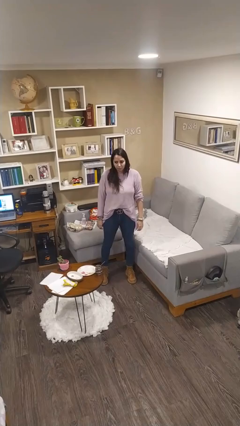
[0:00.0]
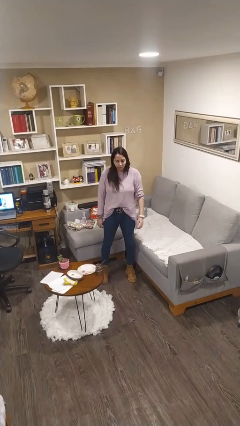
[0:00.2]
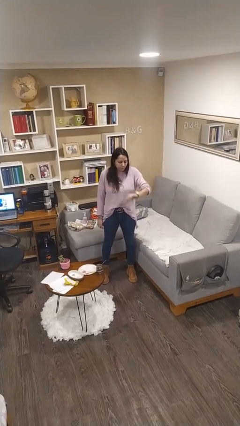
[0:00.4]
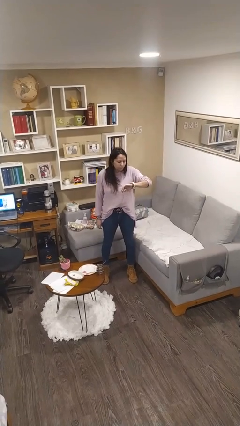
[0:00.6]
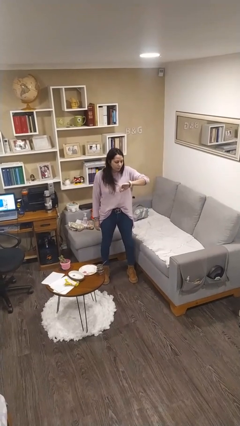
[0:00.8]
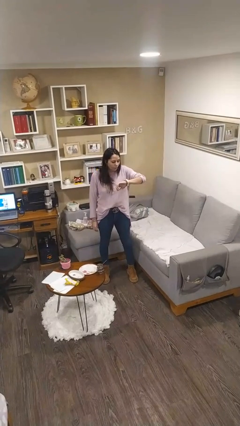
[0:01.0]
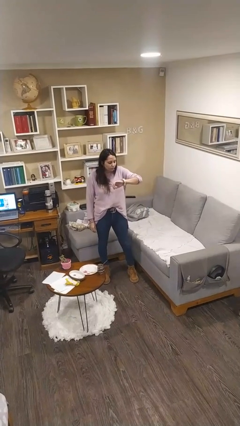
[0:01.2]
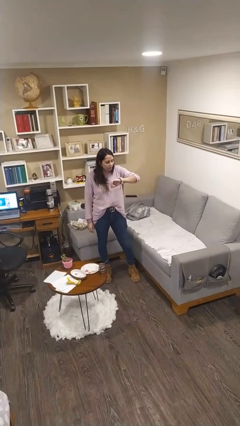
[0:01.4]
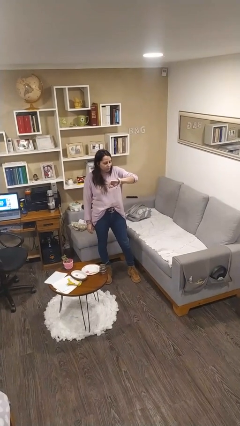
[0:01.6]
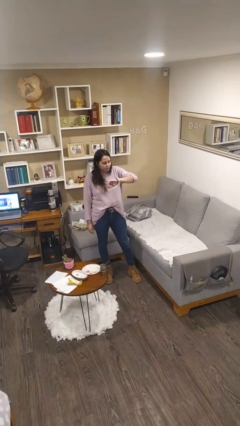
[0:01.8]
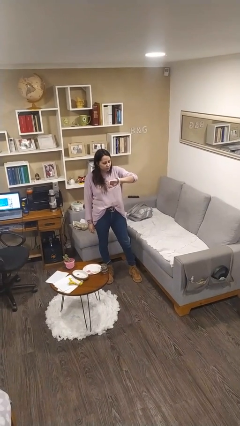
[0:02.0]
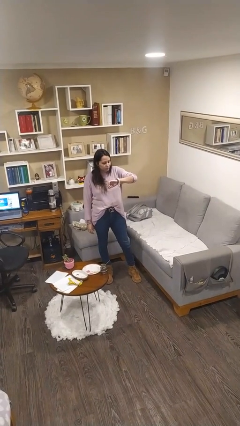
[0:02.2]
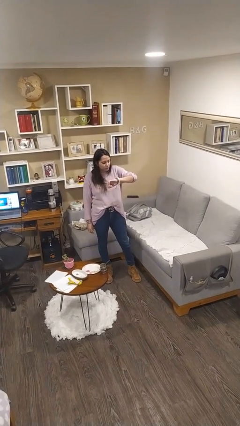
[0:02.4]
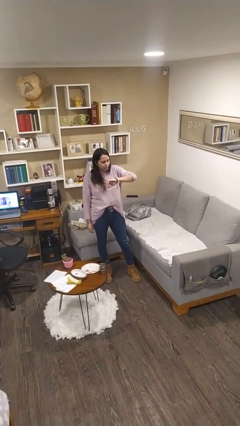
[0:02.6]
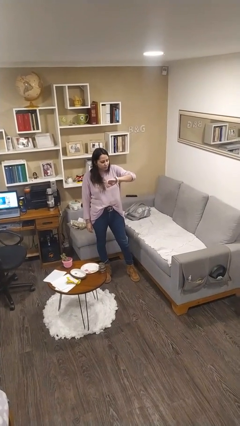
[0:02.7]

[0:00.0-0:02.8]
person looks at wristwatch

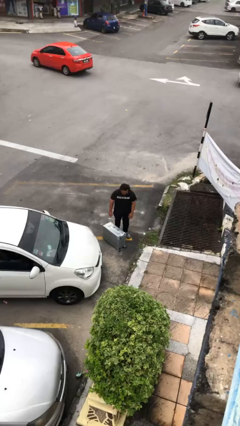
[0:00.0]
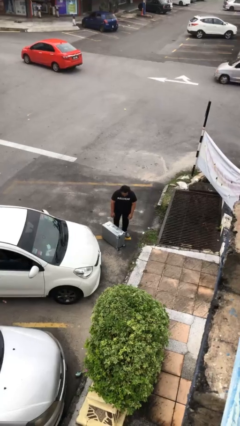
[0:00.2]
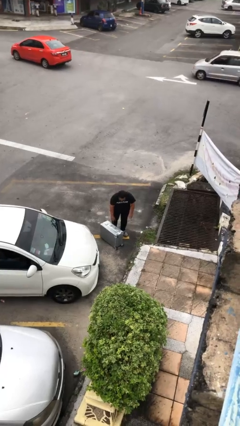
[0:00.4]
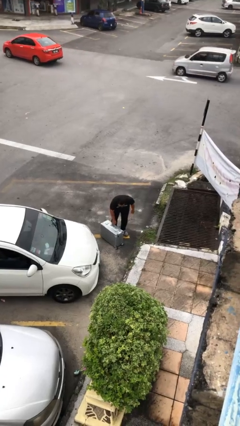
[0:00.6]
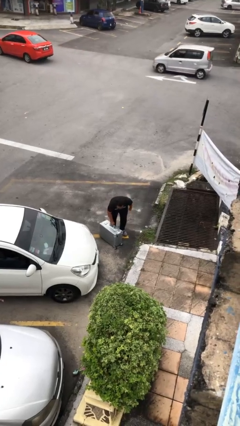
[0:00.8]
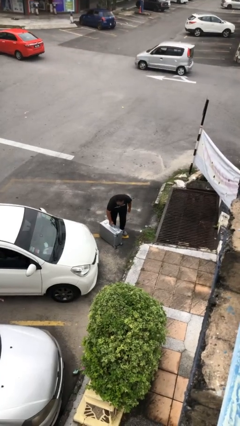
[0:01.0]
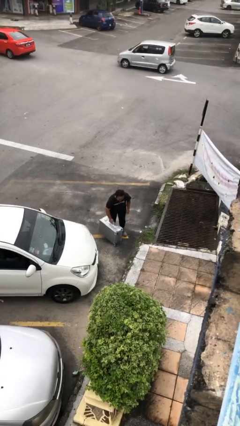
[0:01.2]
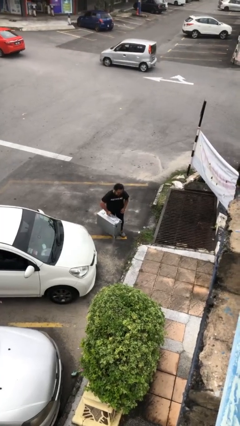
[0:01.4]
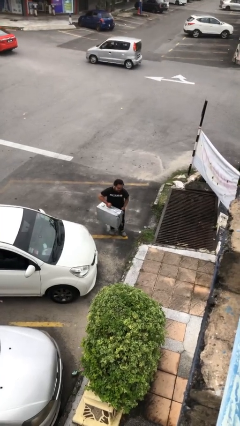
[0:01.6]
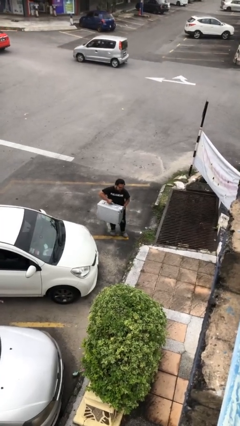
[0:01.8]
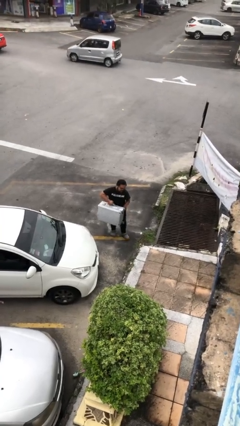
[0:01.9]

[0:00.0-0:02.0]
person picks up object from floor

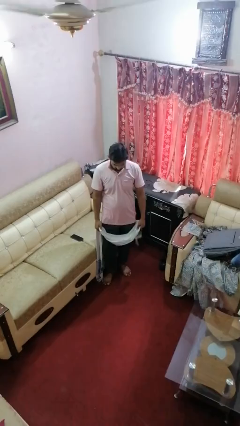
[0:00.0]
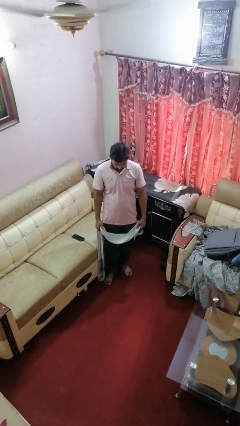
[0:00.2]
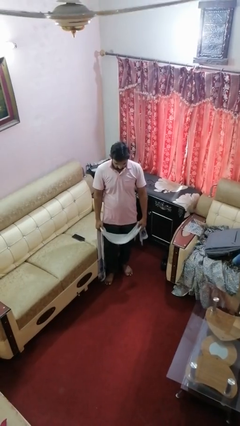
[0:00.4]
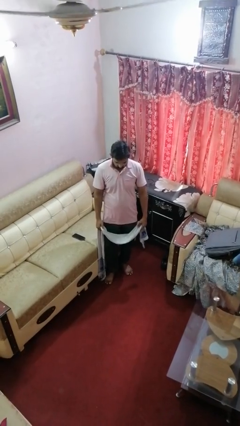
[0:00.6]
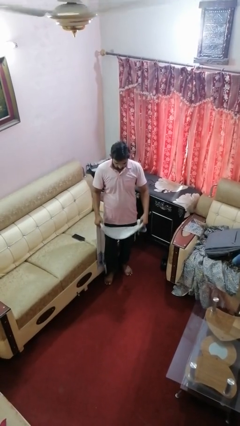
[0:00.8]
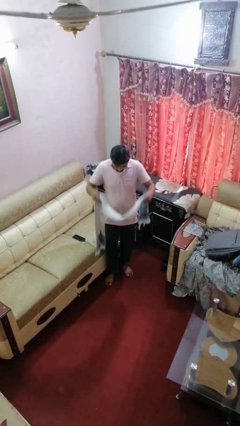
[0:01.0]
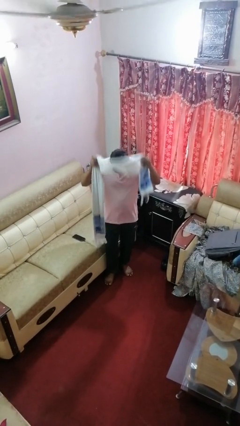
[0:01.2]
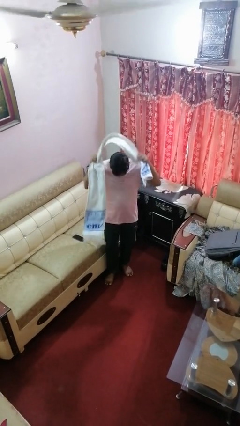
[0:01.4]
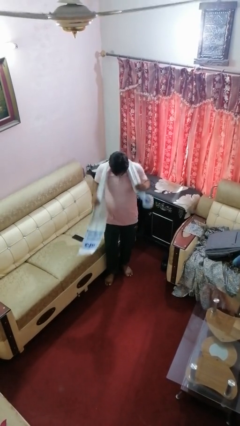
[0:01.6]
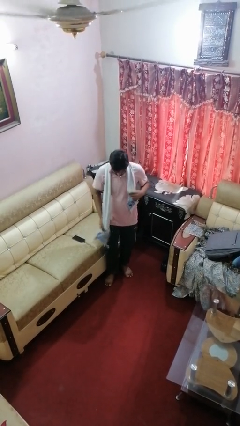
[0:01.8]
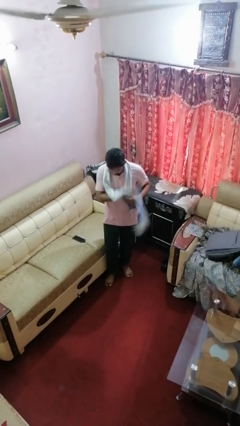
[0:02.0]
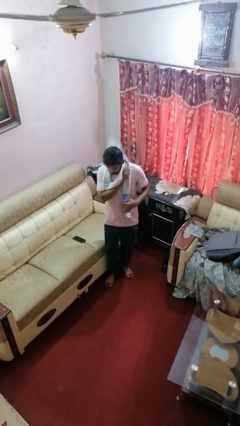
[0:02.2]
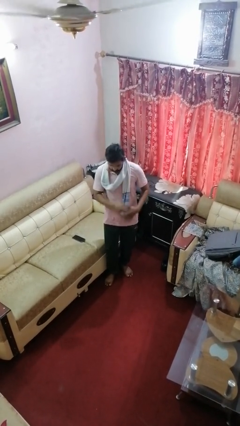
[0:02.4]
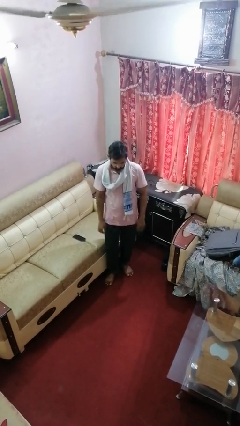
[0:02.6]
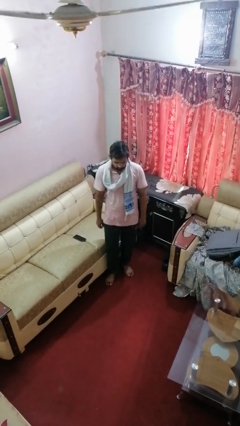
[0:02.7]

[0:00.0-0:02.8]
person puts on scarf

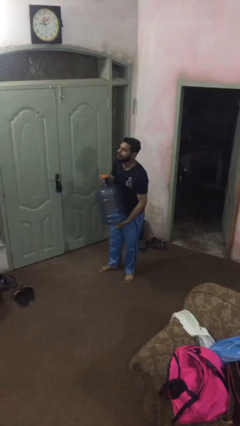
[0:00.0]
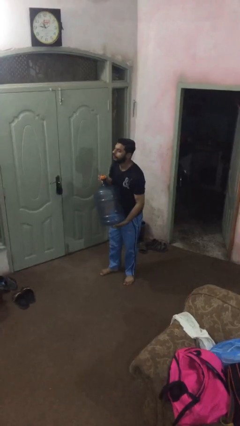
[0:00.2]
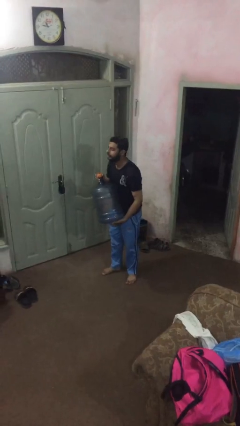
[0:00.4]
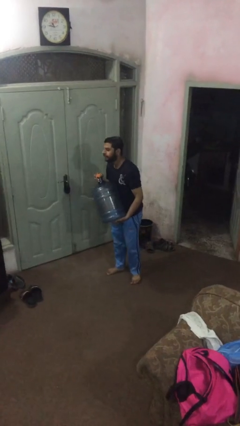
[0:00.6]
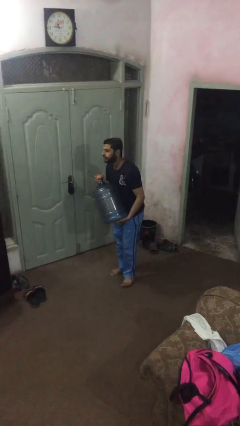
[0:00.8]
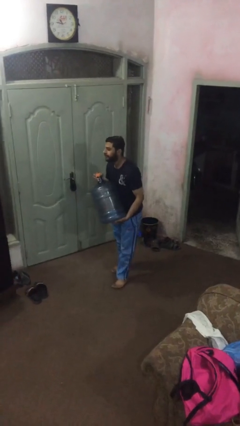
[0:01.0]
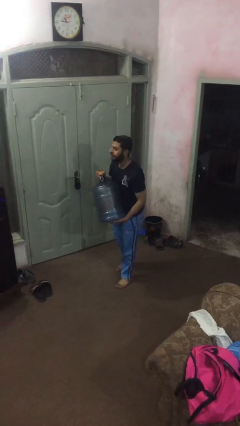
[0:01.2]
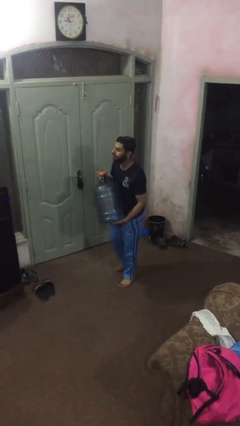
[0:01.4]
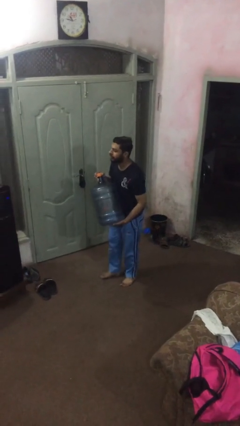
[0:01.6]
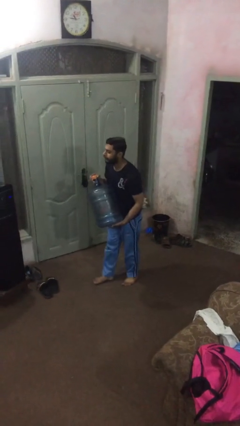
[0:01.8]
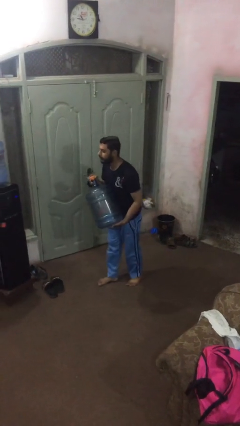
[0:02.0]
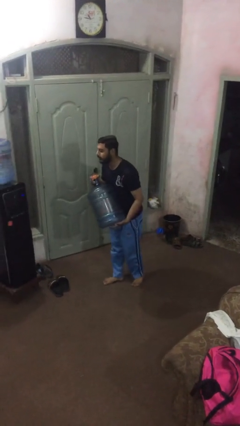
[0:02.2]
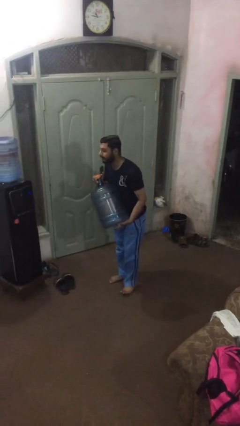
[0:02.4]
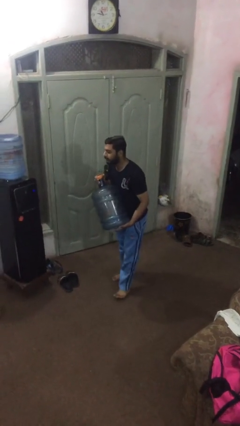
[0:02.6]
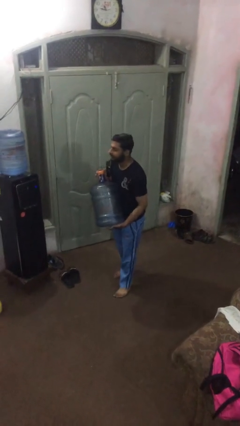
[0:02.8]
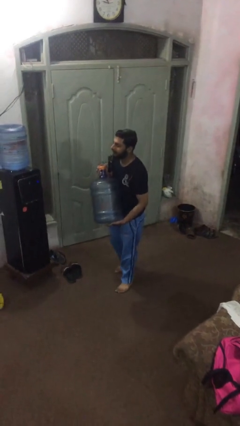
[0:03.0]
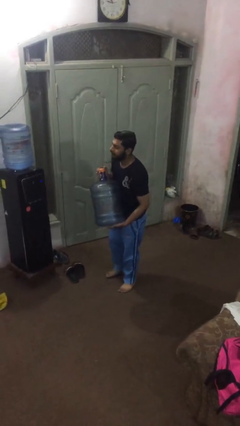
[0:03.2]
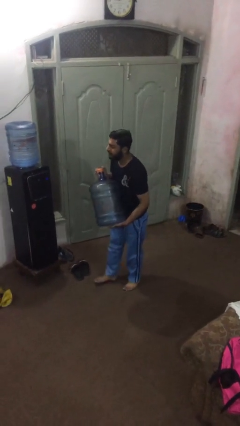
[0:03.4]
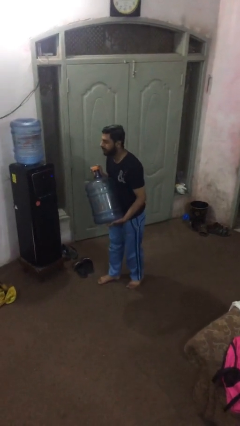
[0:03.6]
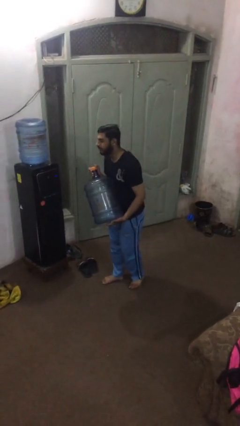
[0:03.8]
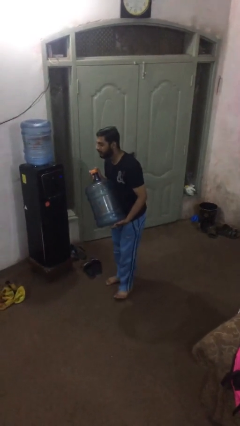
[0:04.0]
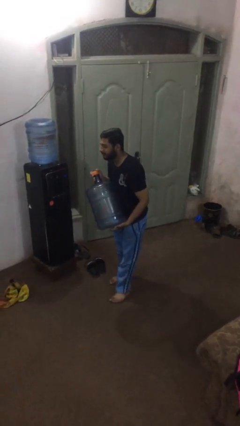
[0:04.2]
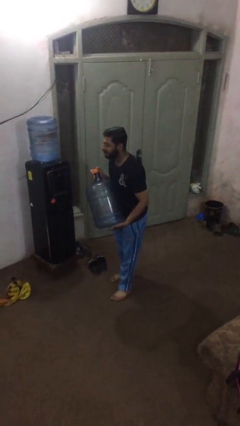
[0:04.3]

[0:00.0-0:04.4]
person carries heavy object

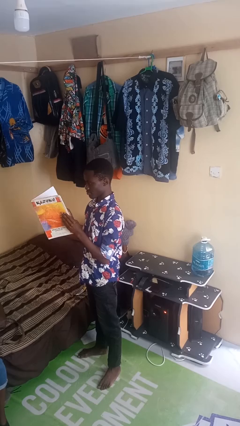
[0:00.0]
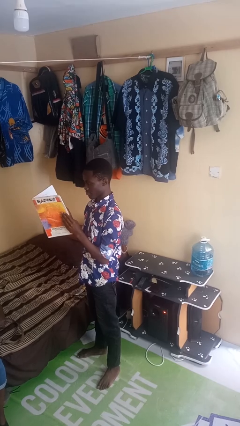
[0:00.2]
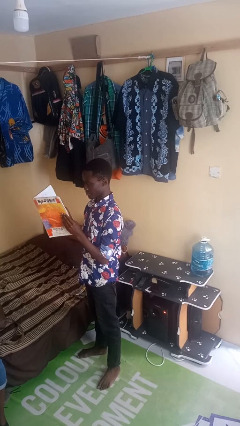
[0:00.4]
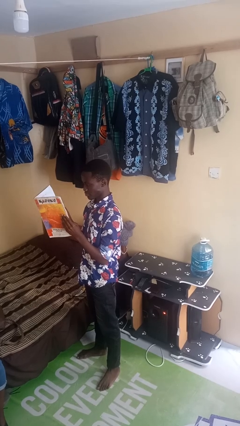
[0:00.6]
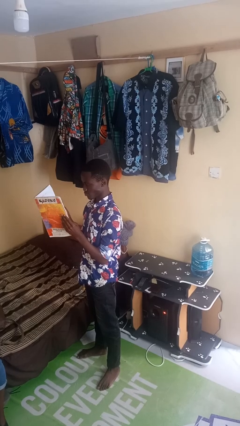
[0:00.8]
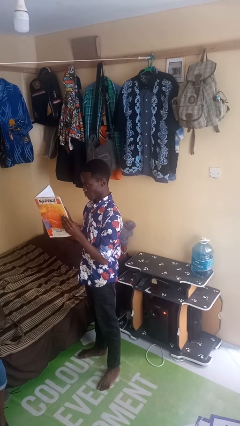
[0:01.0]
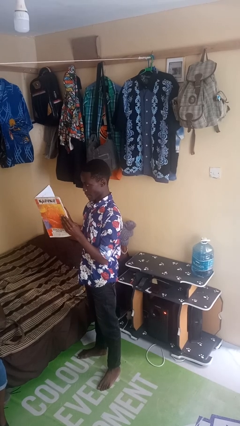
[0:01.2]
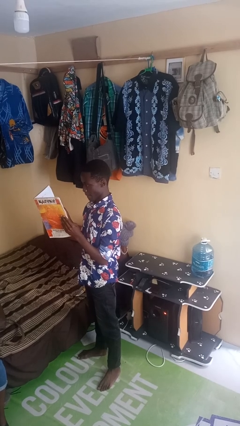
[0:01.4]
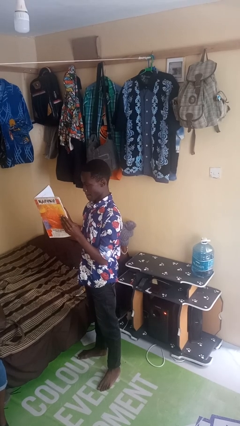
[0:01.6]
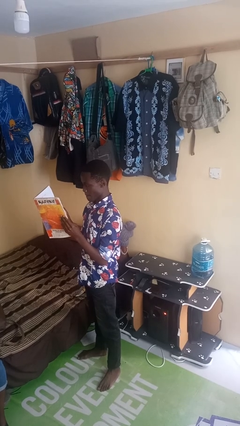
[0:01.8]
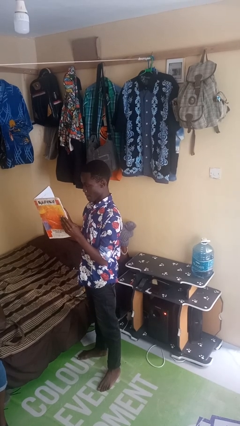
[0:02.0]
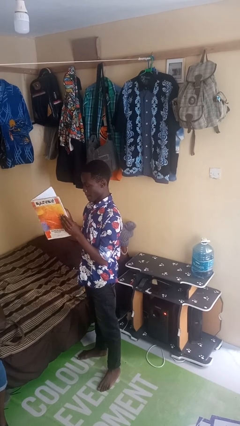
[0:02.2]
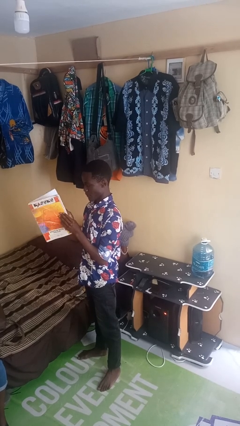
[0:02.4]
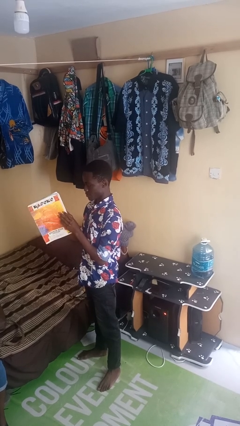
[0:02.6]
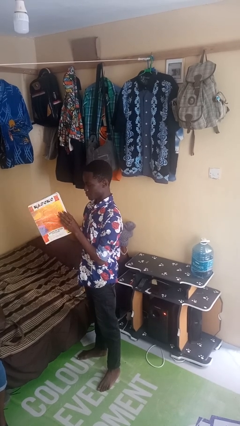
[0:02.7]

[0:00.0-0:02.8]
person reads newspaper

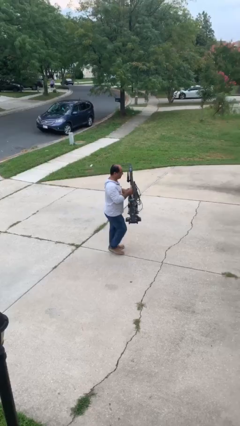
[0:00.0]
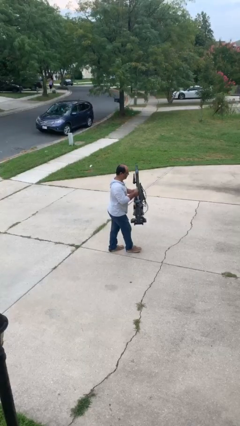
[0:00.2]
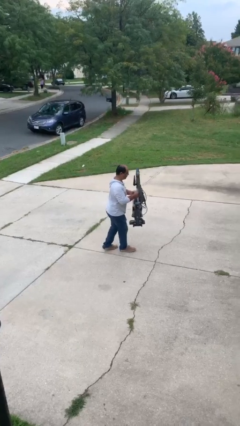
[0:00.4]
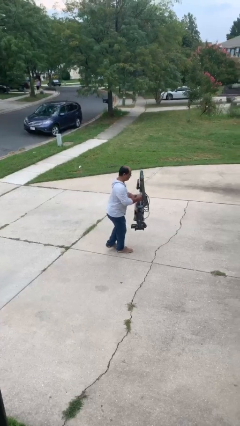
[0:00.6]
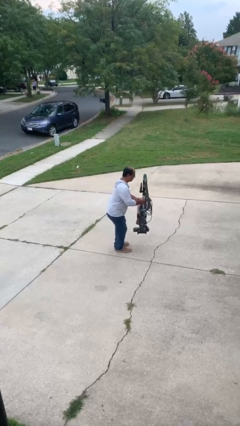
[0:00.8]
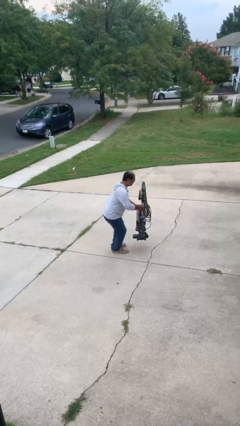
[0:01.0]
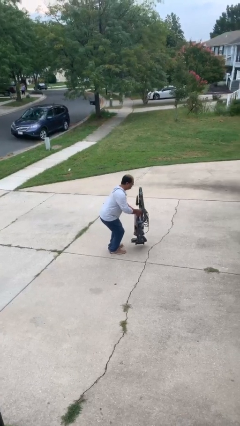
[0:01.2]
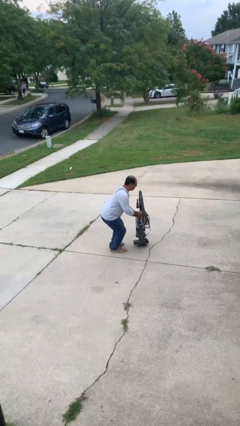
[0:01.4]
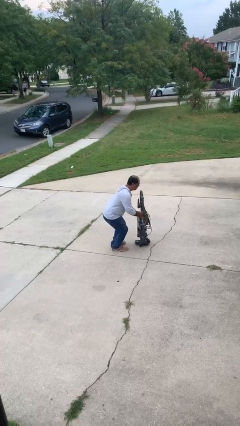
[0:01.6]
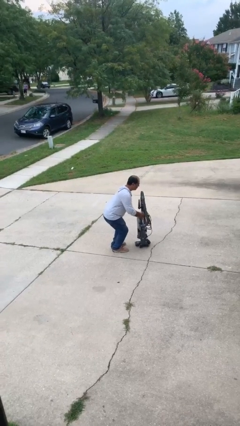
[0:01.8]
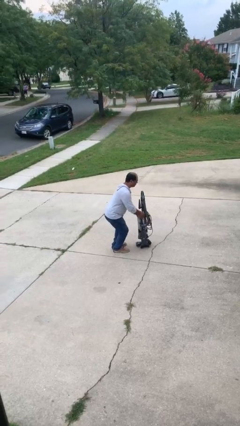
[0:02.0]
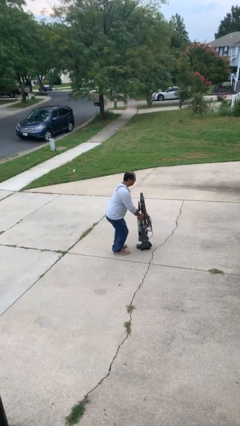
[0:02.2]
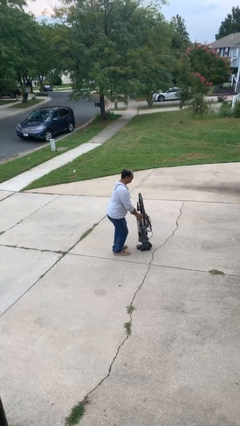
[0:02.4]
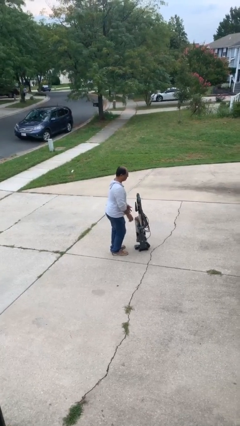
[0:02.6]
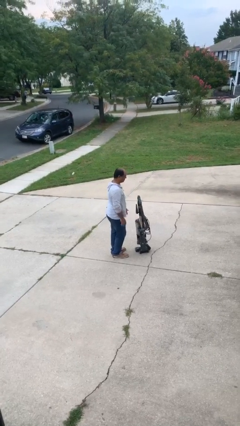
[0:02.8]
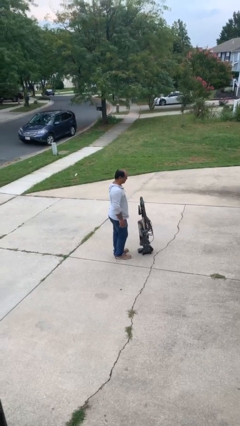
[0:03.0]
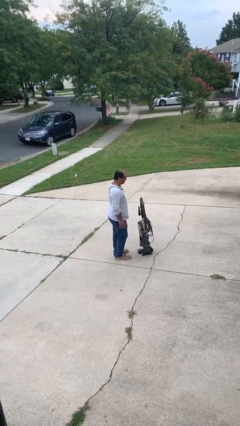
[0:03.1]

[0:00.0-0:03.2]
person puts down object on floor
